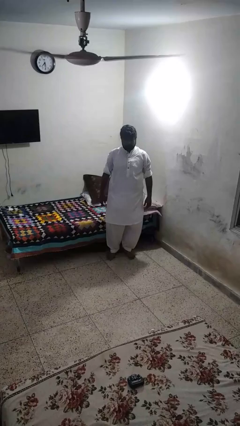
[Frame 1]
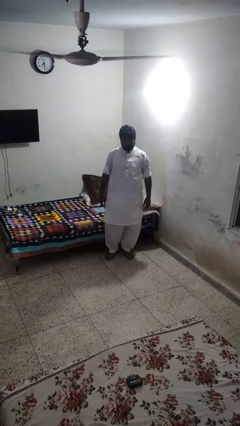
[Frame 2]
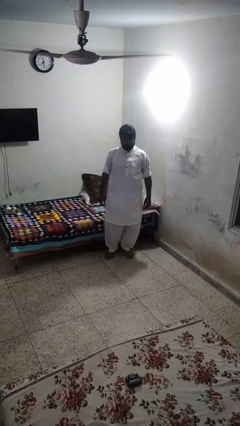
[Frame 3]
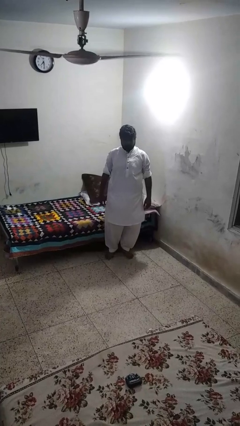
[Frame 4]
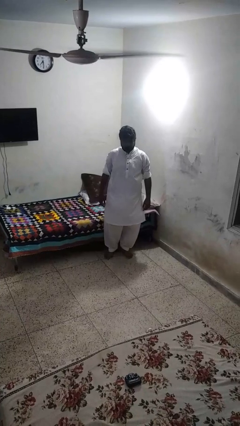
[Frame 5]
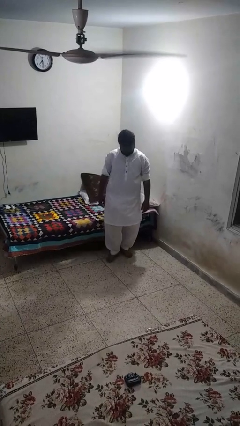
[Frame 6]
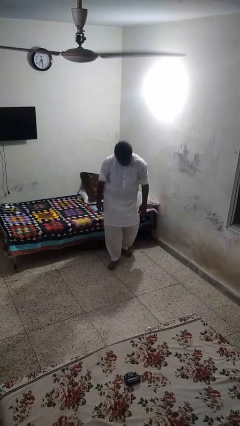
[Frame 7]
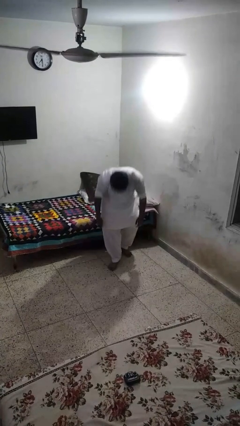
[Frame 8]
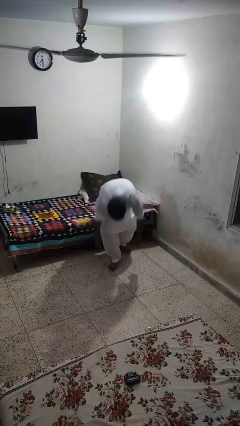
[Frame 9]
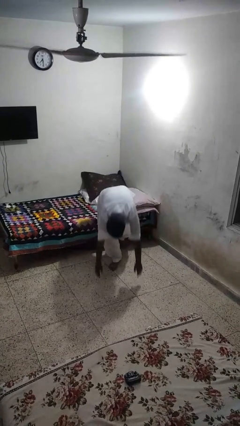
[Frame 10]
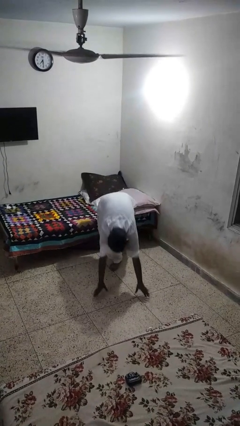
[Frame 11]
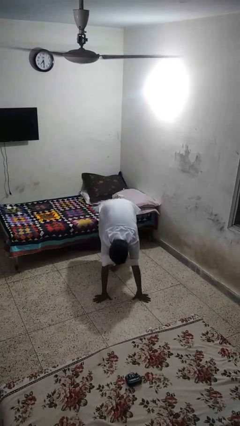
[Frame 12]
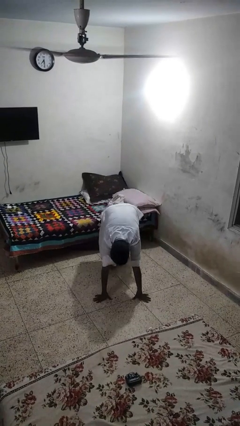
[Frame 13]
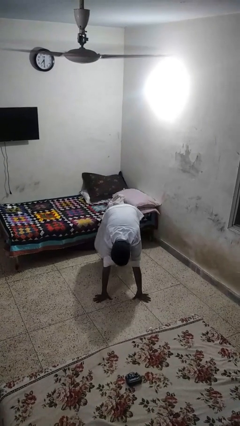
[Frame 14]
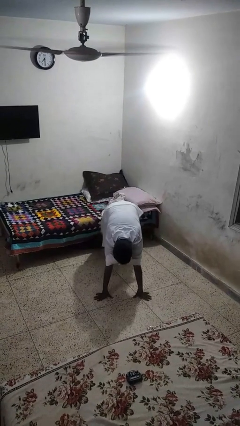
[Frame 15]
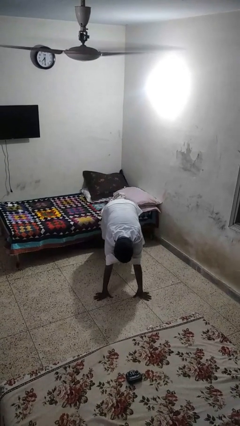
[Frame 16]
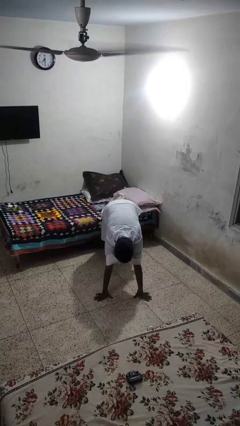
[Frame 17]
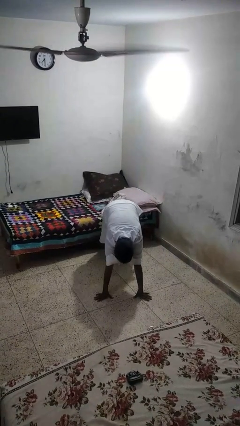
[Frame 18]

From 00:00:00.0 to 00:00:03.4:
person exercises with plank

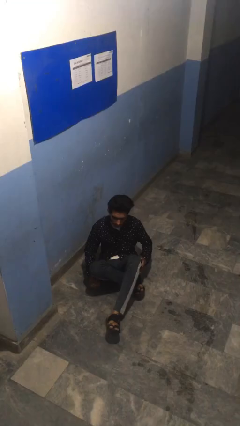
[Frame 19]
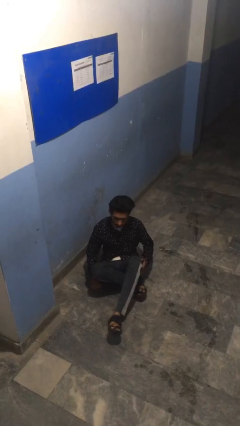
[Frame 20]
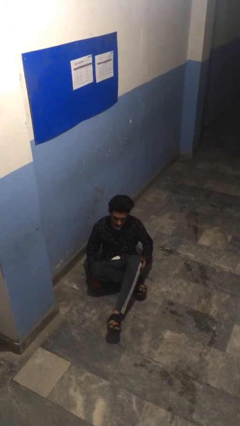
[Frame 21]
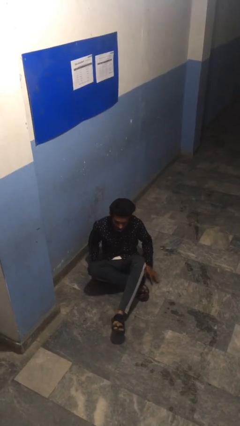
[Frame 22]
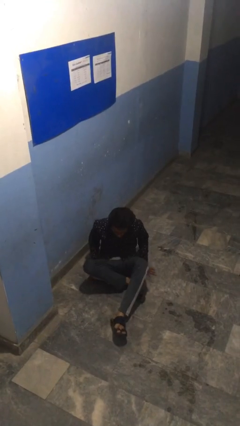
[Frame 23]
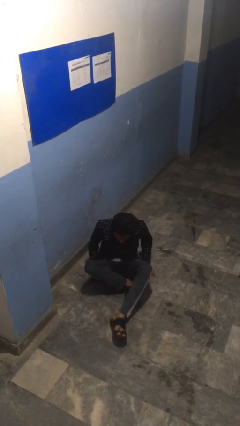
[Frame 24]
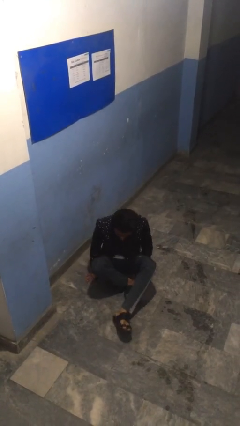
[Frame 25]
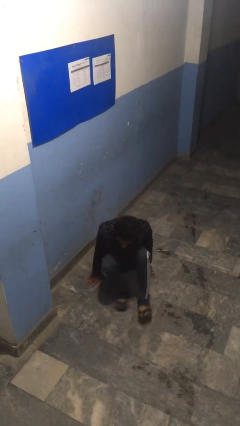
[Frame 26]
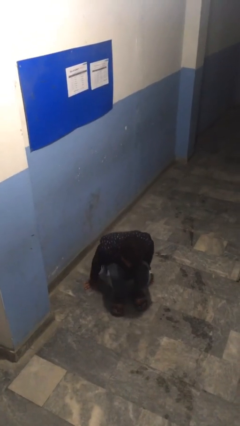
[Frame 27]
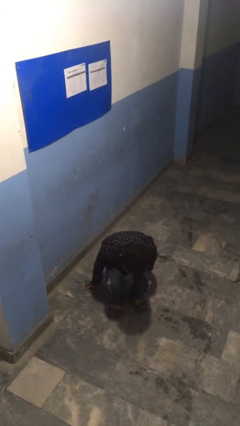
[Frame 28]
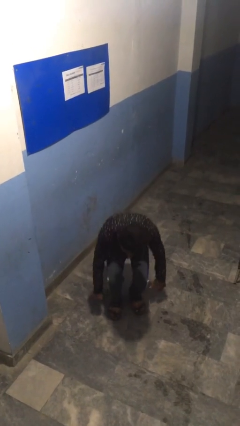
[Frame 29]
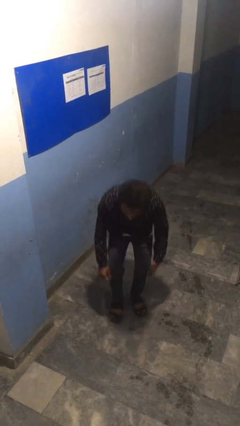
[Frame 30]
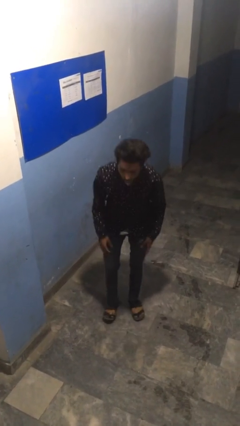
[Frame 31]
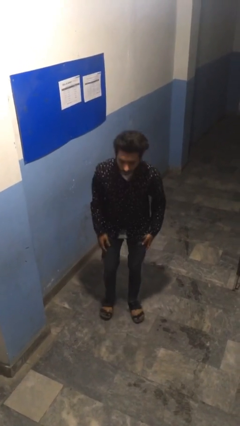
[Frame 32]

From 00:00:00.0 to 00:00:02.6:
person stands up from floor

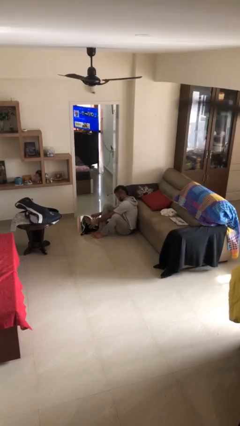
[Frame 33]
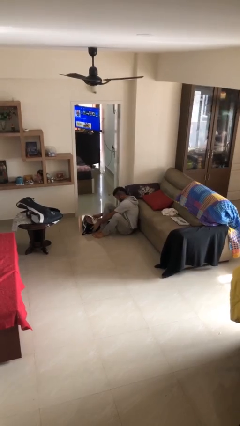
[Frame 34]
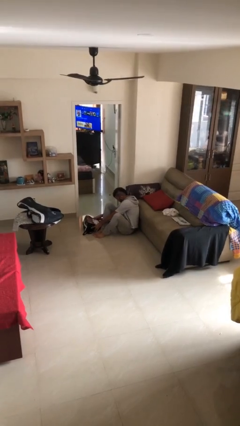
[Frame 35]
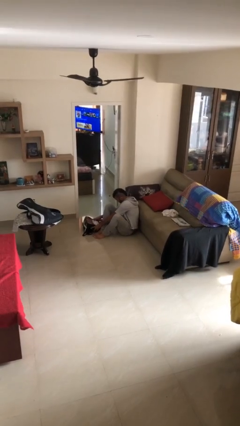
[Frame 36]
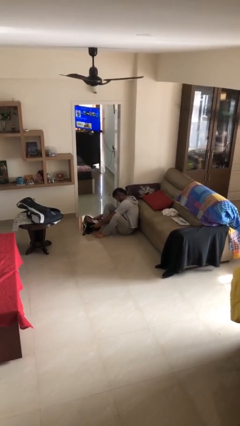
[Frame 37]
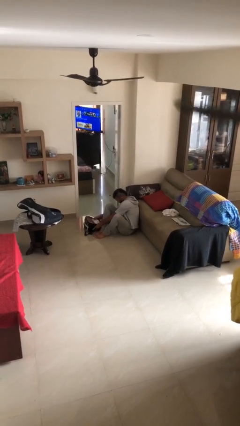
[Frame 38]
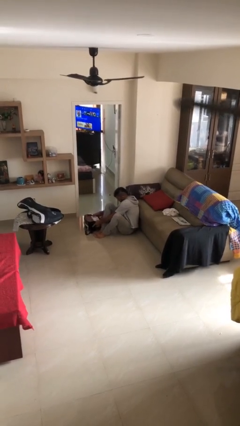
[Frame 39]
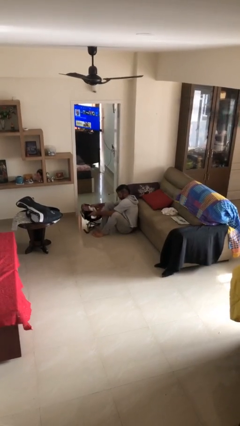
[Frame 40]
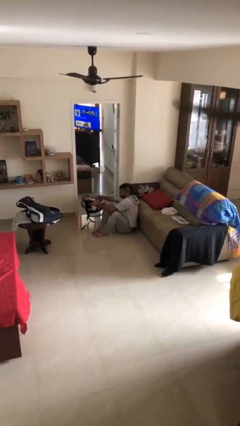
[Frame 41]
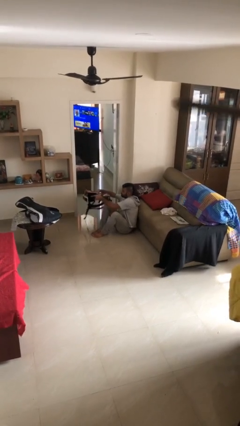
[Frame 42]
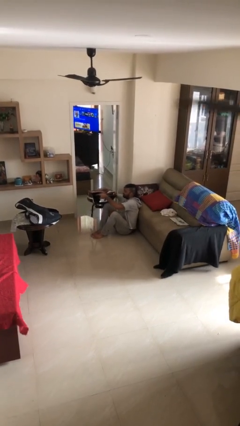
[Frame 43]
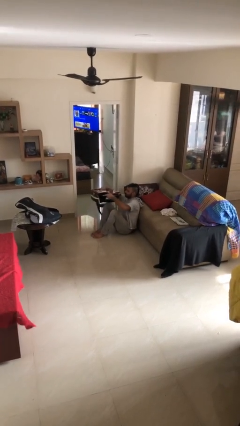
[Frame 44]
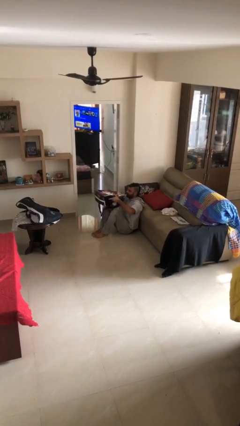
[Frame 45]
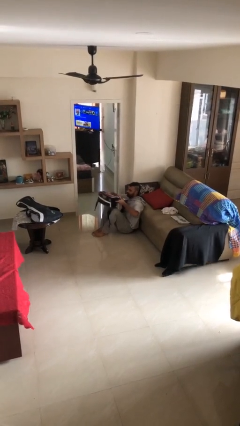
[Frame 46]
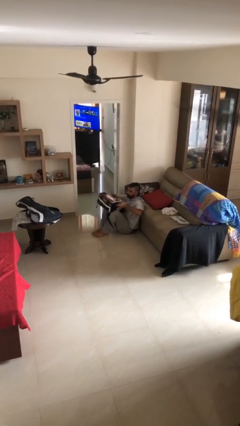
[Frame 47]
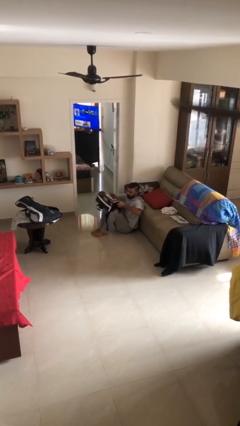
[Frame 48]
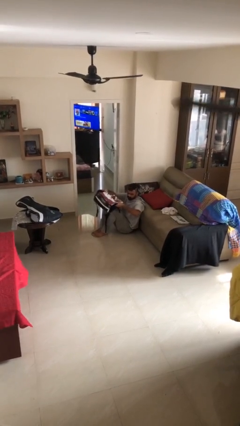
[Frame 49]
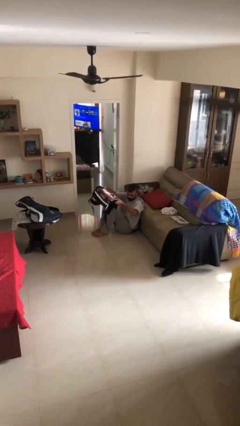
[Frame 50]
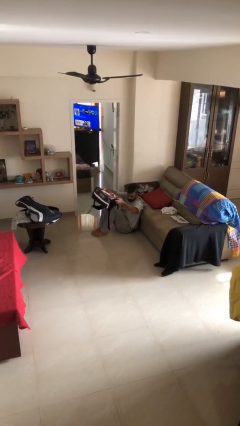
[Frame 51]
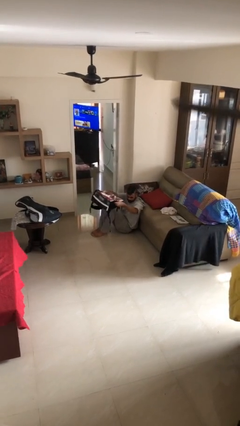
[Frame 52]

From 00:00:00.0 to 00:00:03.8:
person picks up object from floor

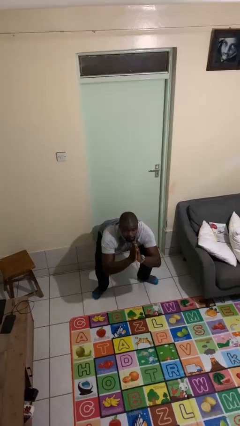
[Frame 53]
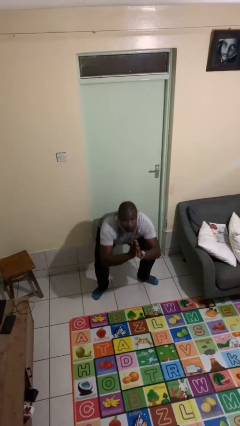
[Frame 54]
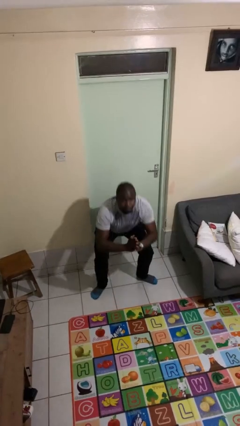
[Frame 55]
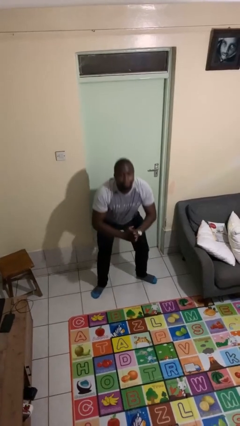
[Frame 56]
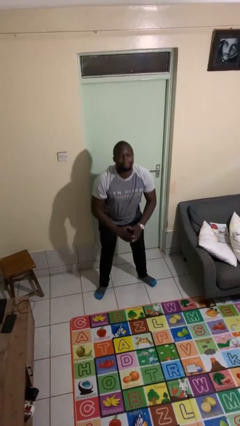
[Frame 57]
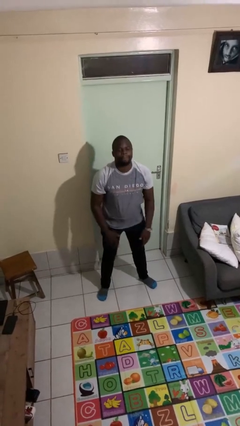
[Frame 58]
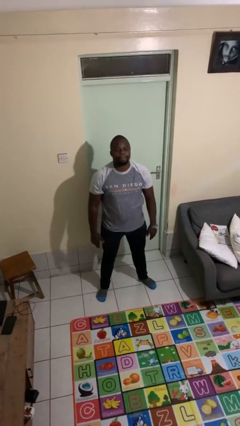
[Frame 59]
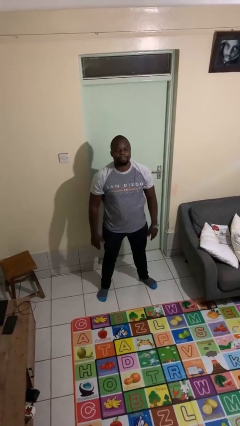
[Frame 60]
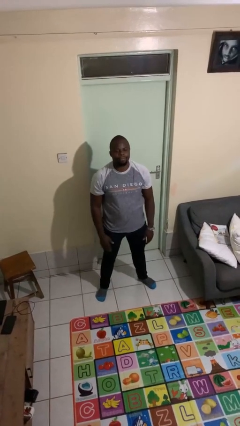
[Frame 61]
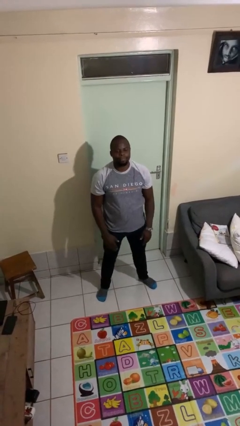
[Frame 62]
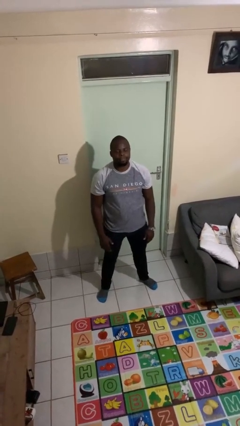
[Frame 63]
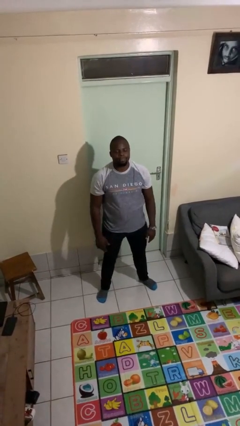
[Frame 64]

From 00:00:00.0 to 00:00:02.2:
person stands up

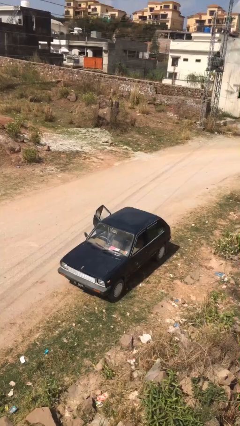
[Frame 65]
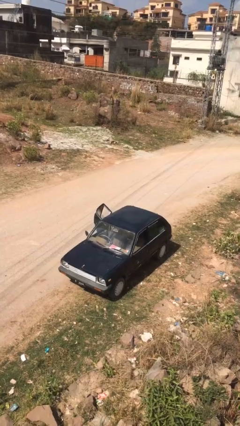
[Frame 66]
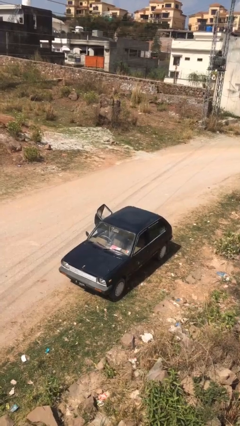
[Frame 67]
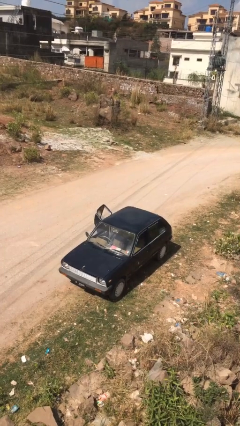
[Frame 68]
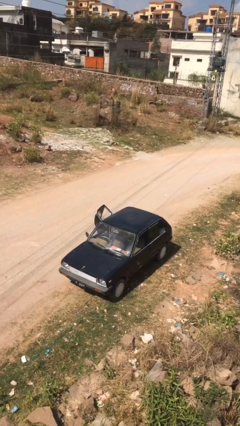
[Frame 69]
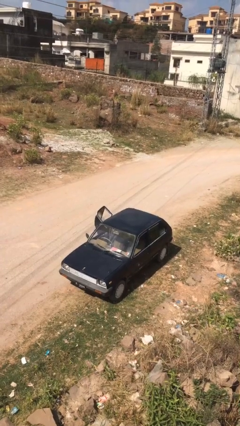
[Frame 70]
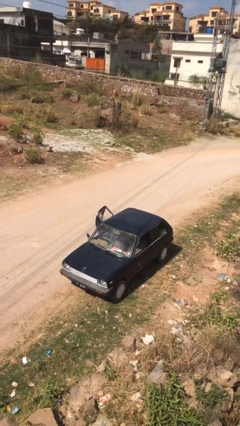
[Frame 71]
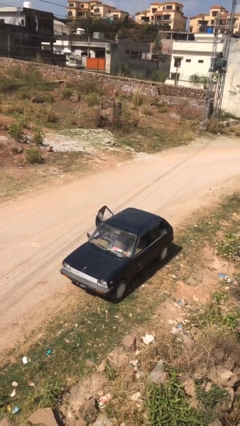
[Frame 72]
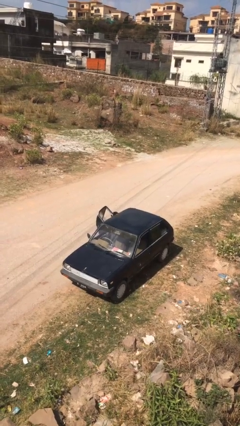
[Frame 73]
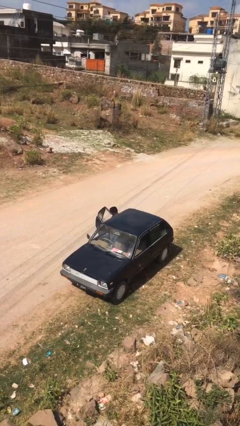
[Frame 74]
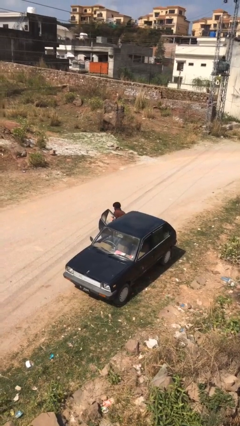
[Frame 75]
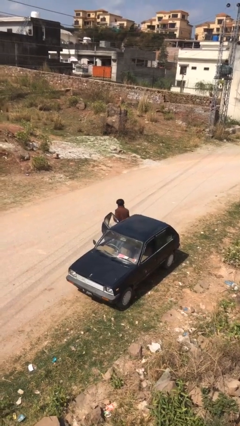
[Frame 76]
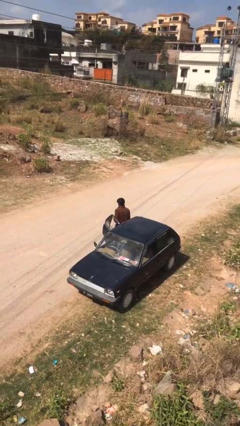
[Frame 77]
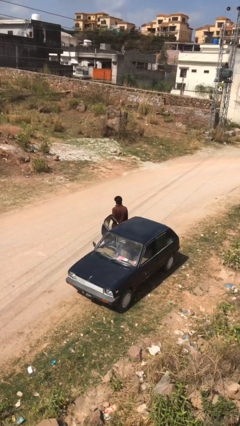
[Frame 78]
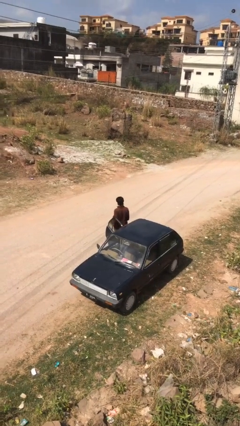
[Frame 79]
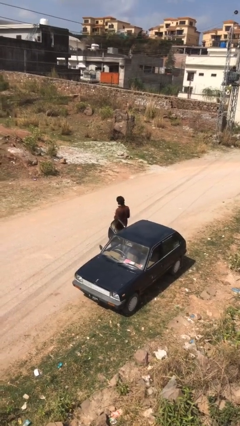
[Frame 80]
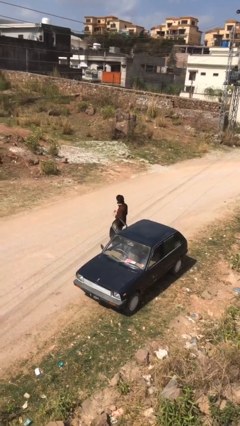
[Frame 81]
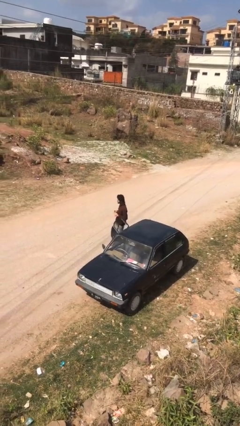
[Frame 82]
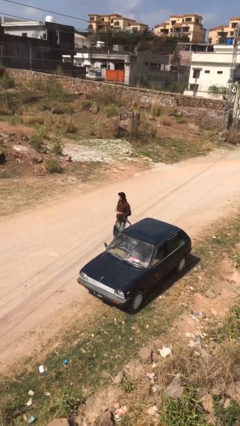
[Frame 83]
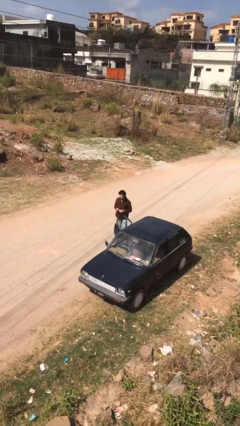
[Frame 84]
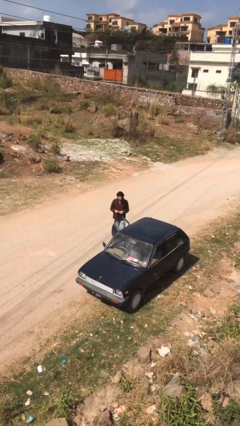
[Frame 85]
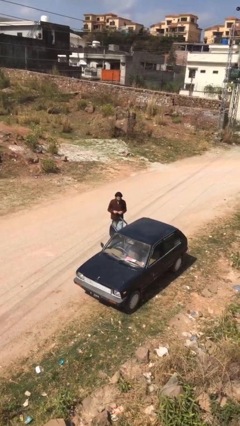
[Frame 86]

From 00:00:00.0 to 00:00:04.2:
person exits car

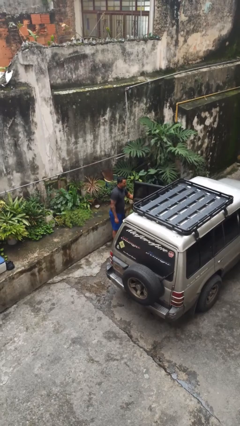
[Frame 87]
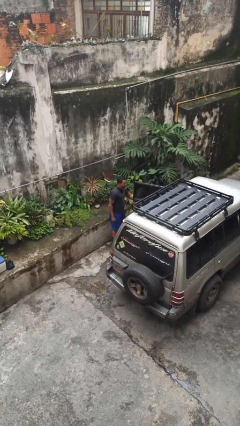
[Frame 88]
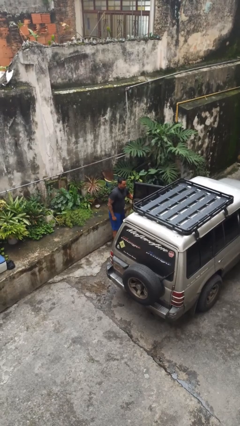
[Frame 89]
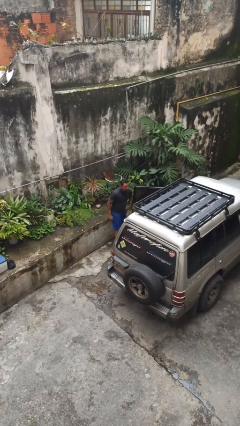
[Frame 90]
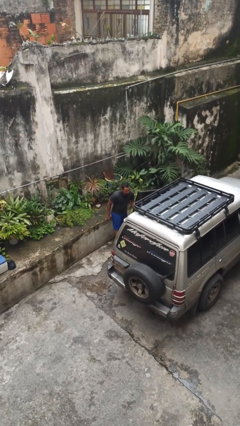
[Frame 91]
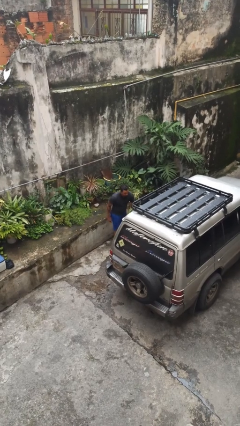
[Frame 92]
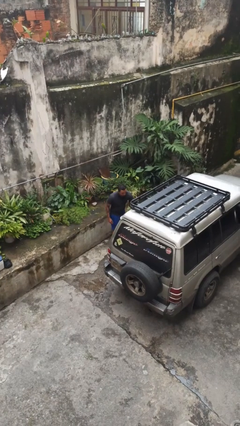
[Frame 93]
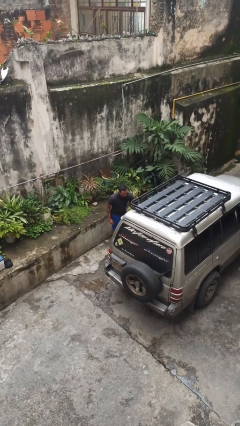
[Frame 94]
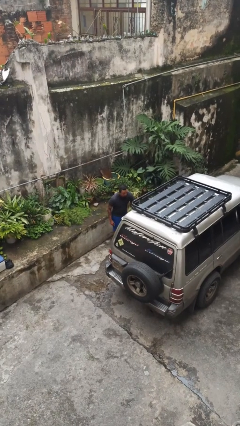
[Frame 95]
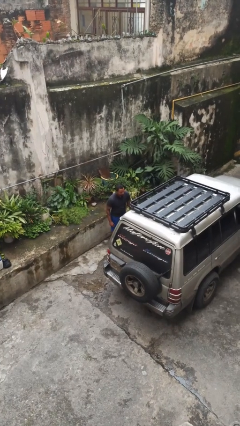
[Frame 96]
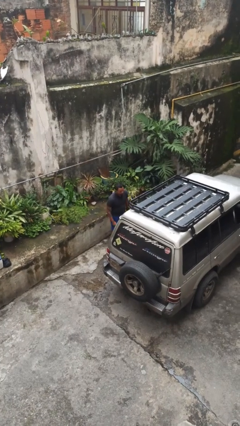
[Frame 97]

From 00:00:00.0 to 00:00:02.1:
person closes car door
